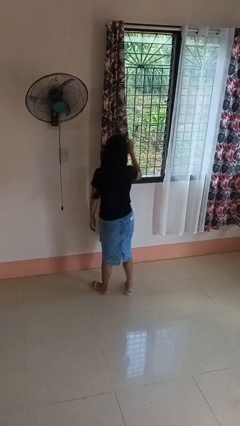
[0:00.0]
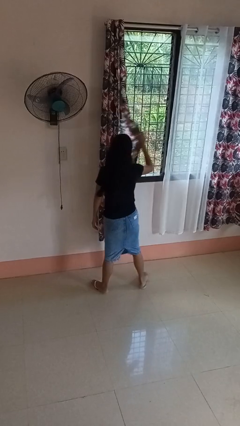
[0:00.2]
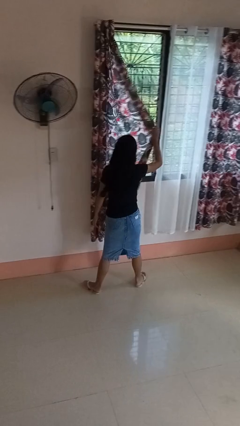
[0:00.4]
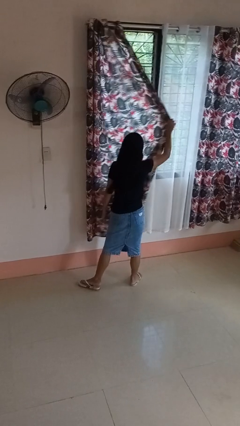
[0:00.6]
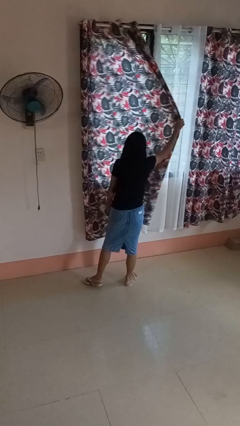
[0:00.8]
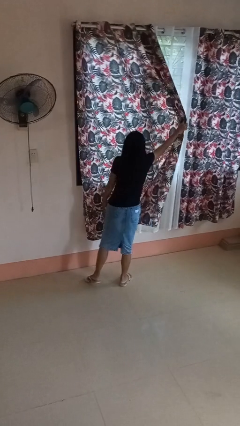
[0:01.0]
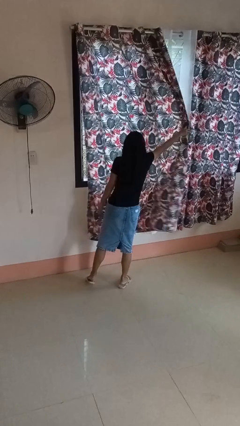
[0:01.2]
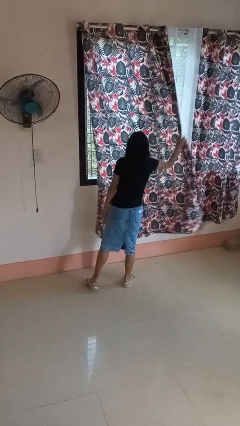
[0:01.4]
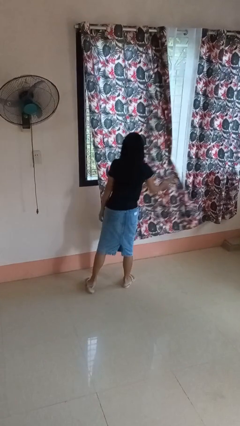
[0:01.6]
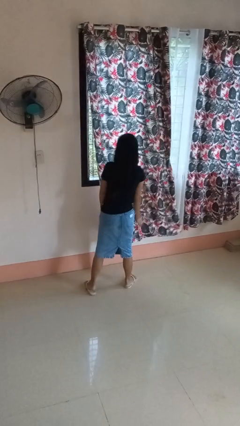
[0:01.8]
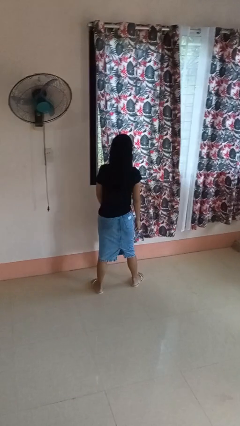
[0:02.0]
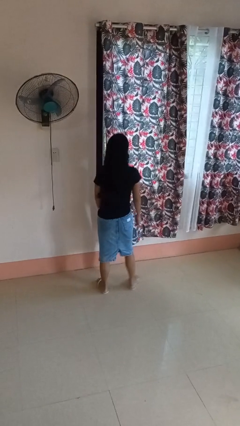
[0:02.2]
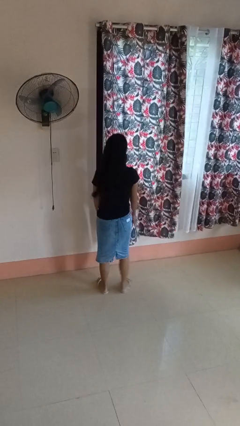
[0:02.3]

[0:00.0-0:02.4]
person closes curtains

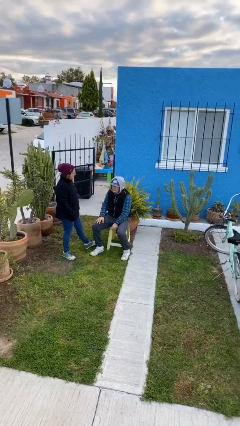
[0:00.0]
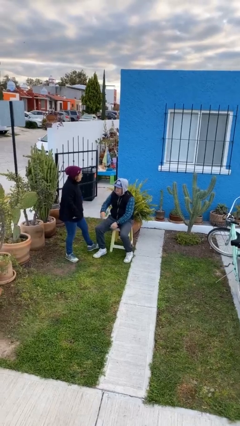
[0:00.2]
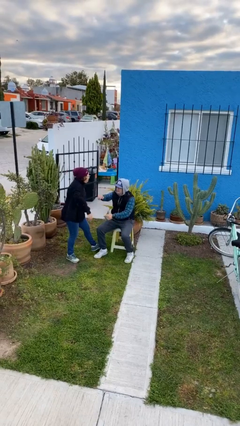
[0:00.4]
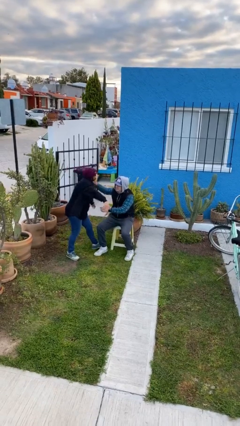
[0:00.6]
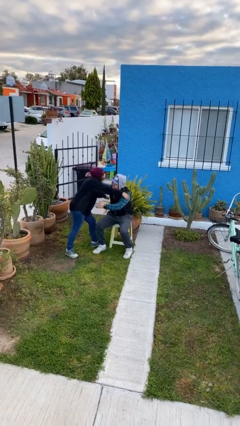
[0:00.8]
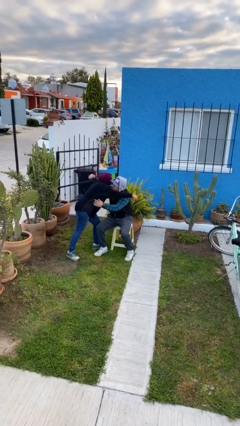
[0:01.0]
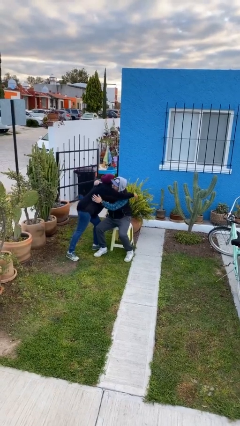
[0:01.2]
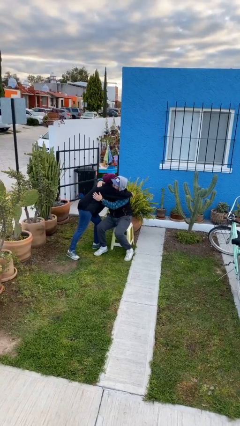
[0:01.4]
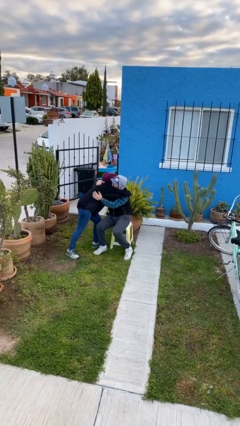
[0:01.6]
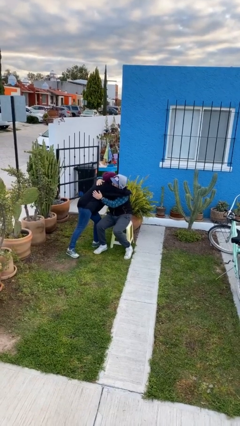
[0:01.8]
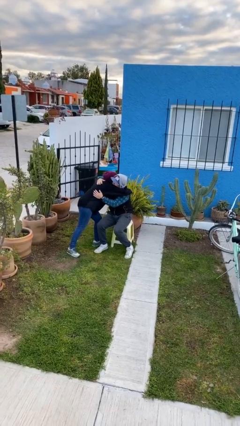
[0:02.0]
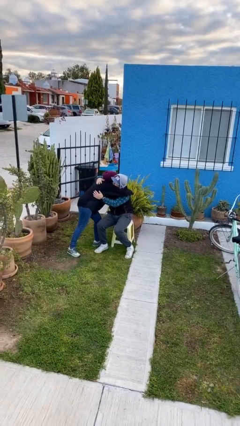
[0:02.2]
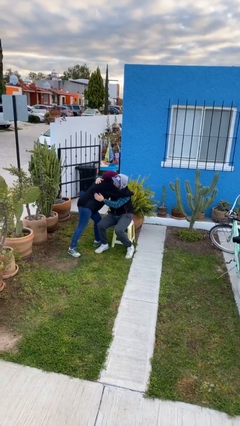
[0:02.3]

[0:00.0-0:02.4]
person embraces person

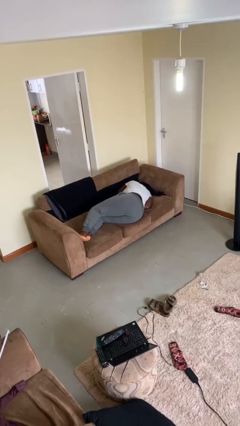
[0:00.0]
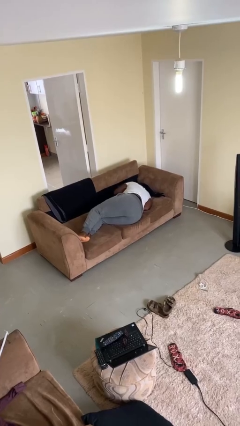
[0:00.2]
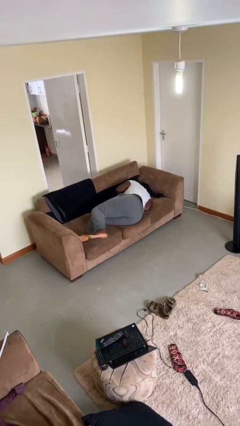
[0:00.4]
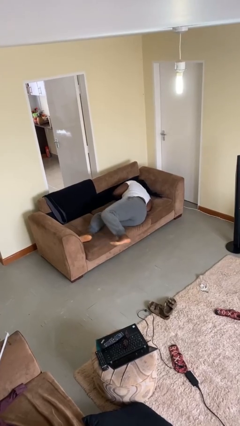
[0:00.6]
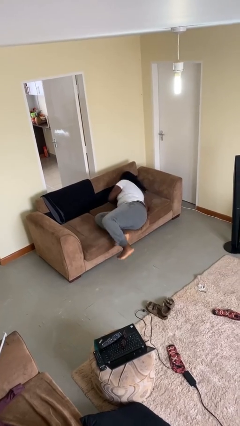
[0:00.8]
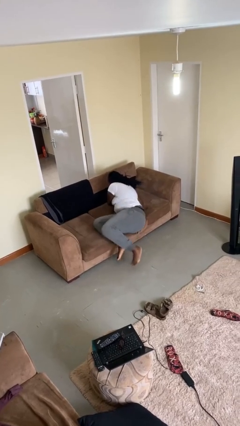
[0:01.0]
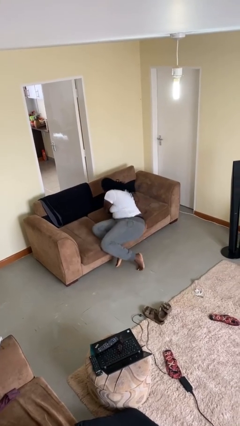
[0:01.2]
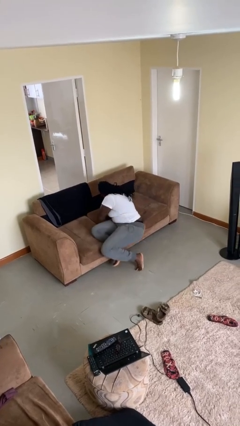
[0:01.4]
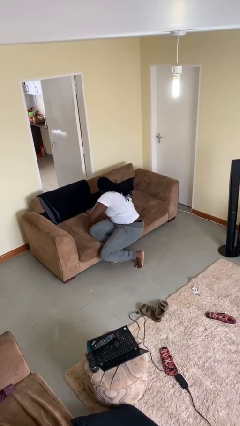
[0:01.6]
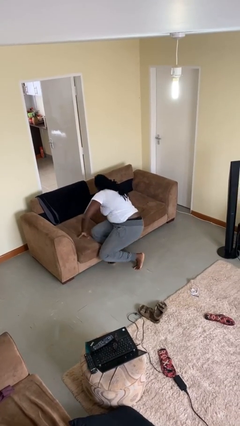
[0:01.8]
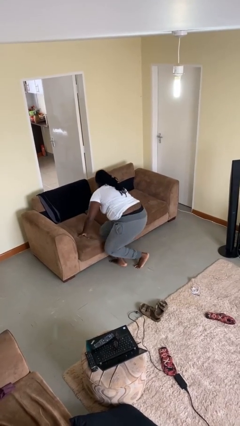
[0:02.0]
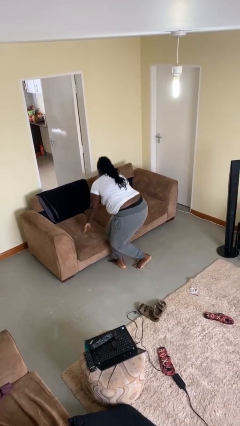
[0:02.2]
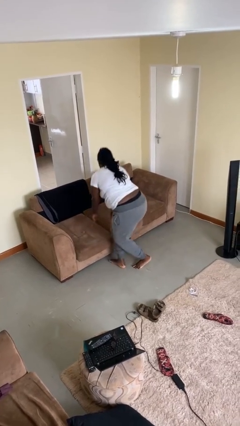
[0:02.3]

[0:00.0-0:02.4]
person stands up

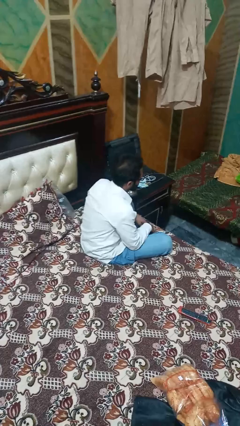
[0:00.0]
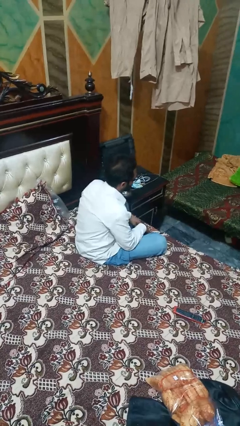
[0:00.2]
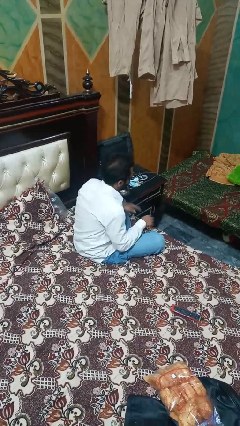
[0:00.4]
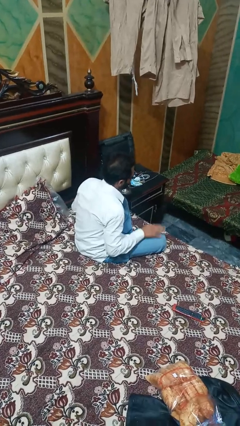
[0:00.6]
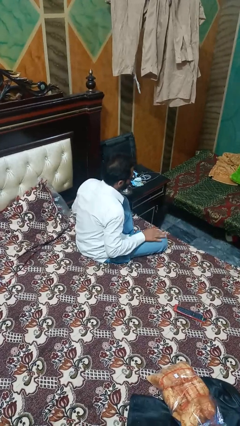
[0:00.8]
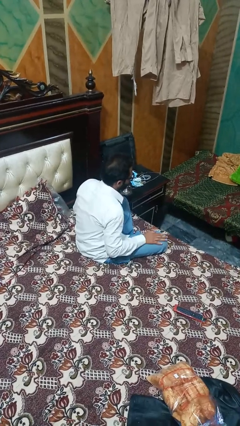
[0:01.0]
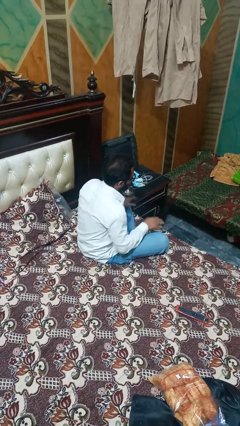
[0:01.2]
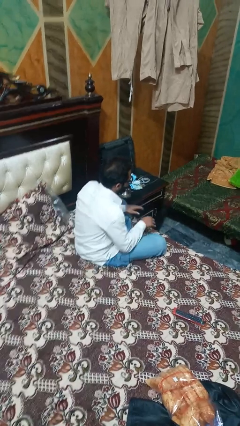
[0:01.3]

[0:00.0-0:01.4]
person slaps hands on thighs

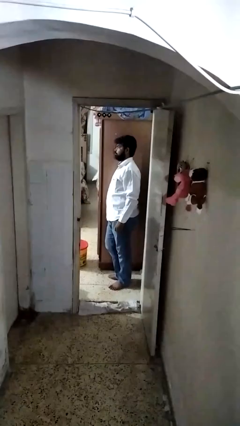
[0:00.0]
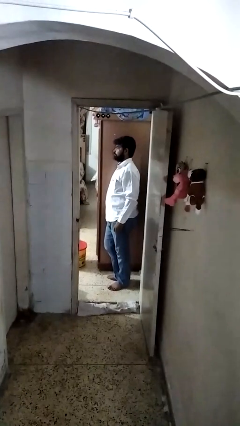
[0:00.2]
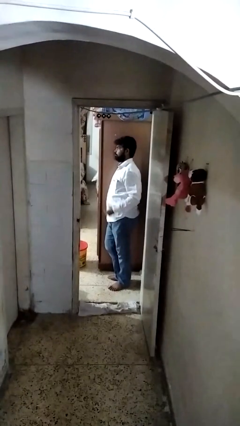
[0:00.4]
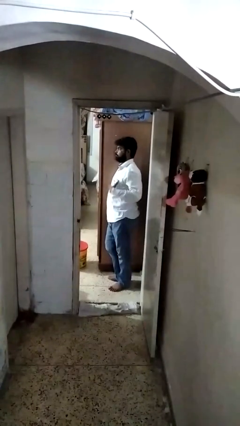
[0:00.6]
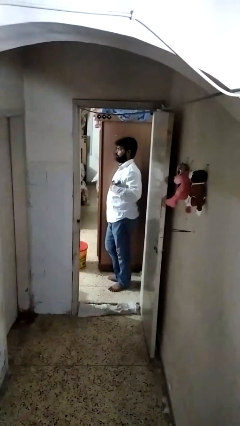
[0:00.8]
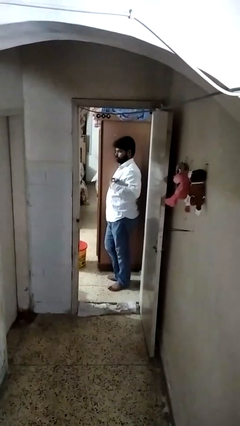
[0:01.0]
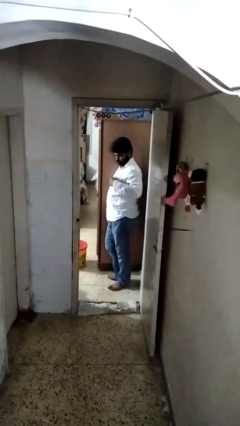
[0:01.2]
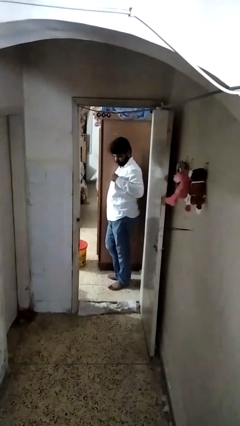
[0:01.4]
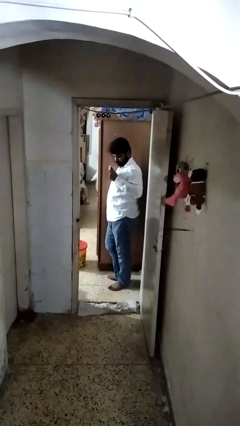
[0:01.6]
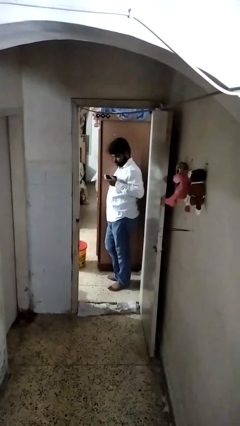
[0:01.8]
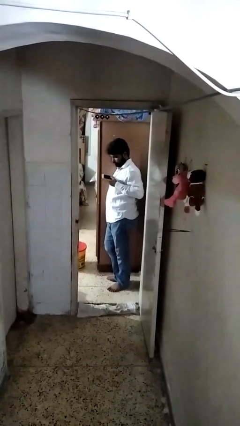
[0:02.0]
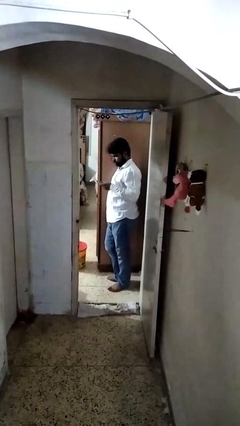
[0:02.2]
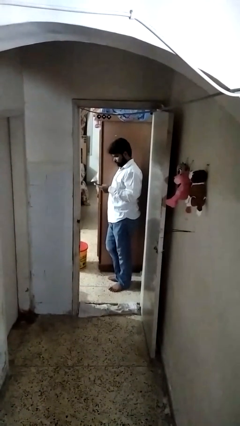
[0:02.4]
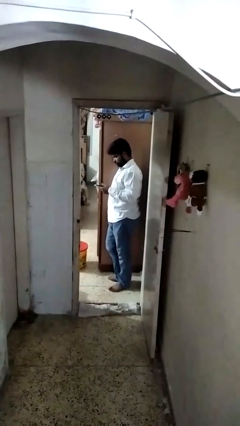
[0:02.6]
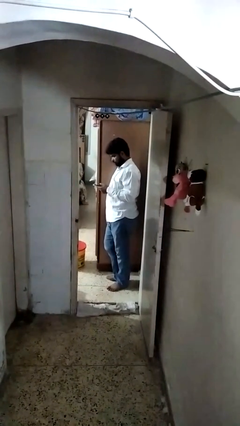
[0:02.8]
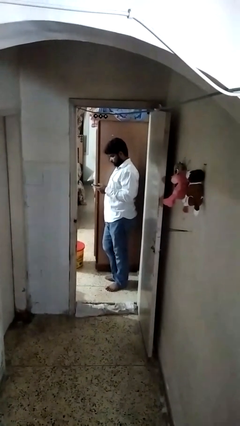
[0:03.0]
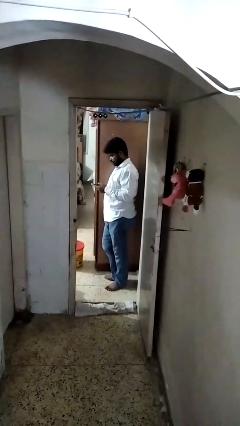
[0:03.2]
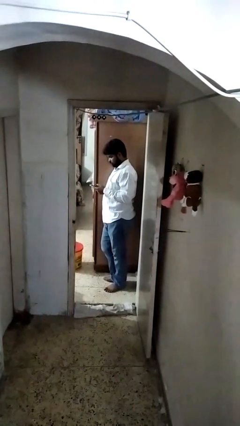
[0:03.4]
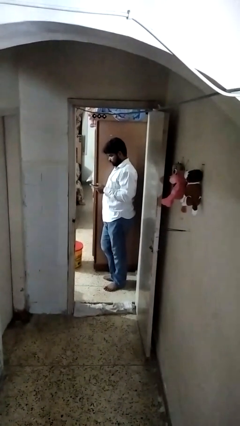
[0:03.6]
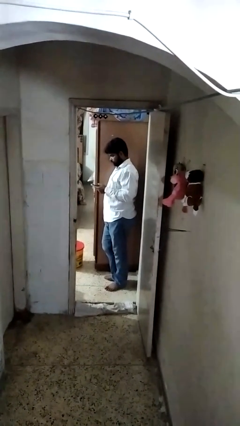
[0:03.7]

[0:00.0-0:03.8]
person takes phone from pocket

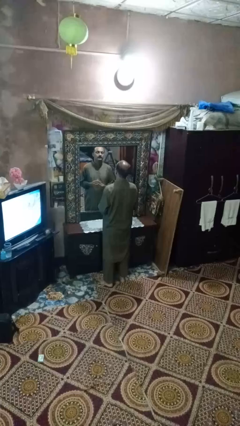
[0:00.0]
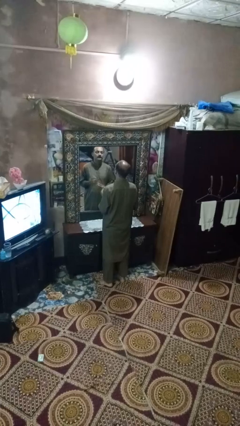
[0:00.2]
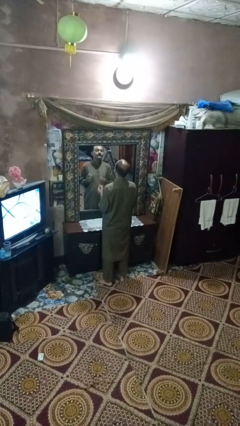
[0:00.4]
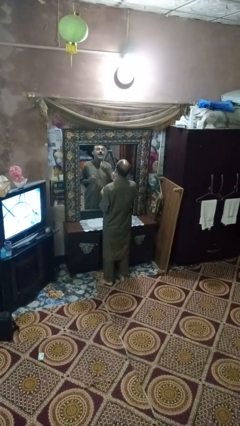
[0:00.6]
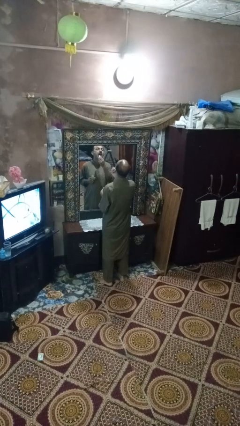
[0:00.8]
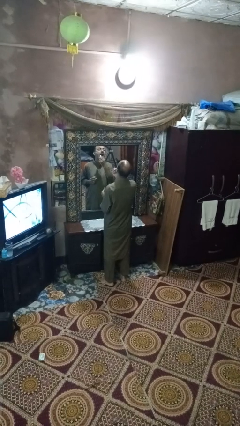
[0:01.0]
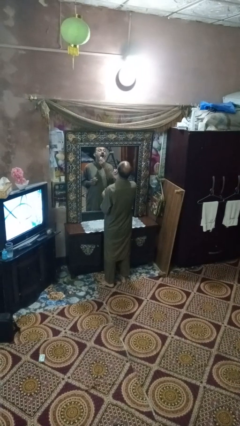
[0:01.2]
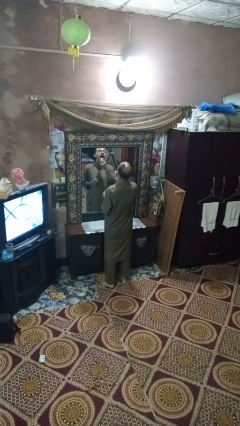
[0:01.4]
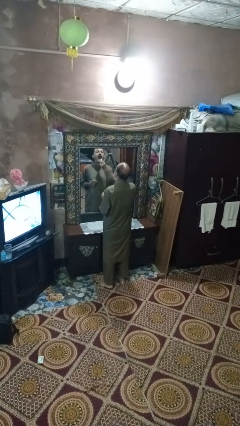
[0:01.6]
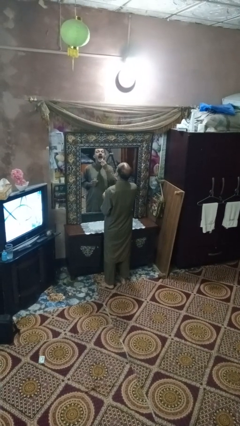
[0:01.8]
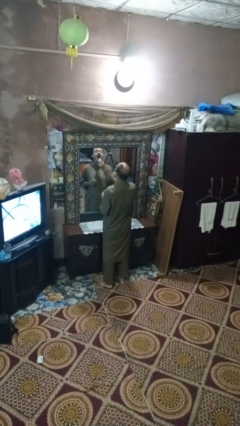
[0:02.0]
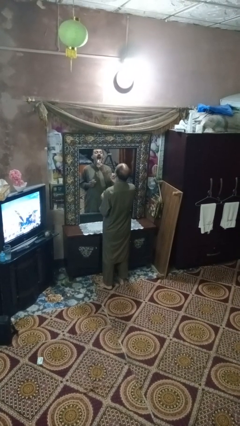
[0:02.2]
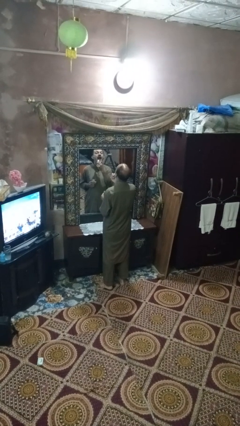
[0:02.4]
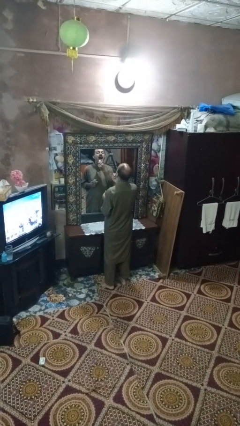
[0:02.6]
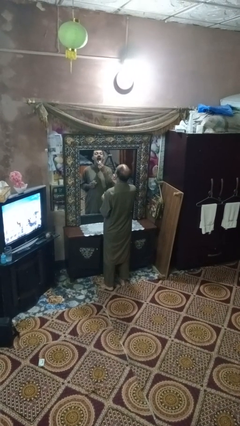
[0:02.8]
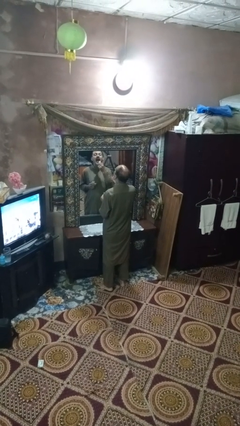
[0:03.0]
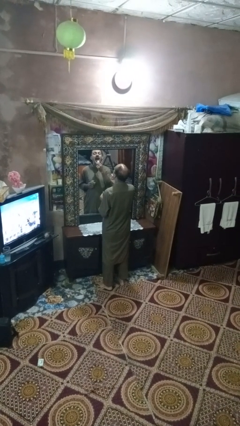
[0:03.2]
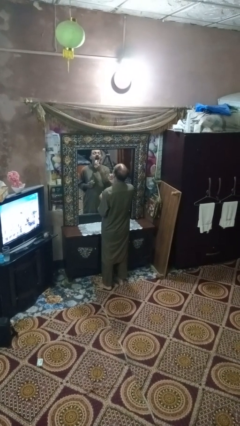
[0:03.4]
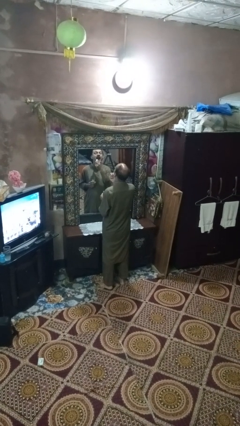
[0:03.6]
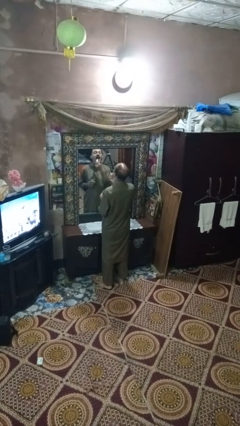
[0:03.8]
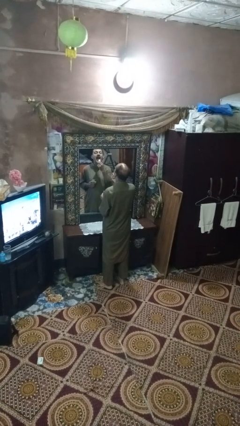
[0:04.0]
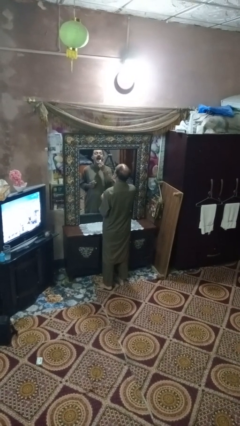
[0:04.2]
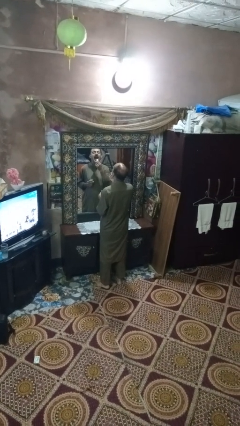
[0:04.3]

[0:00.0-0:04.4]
person applies lip makeup

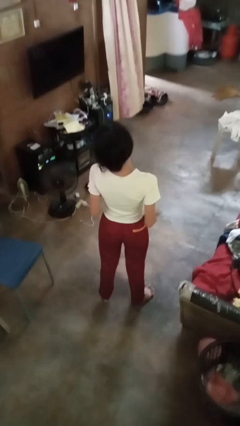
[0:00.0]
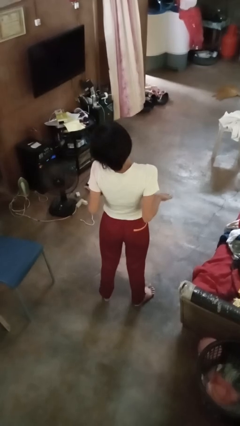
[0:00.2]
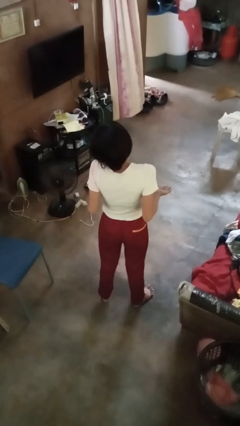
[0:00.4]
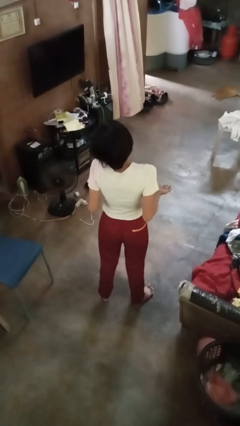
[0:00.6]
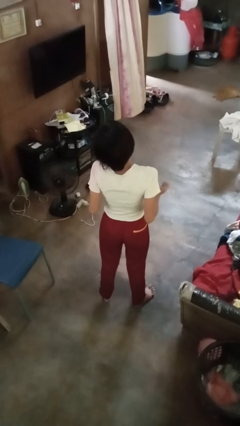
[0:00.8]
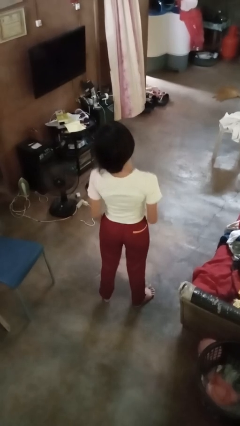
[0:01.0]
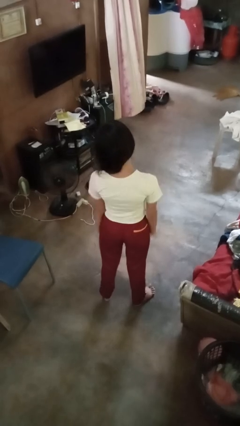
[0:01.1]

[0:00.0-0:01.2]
person shrugs
